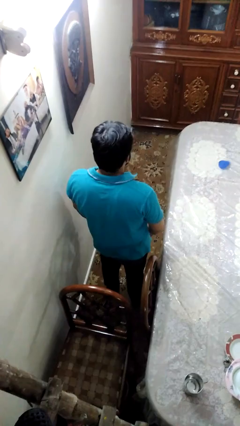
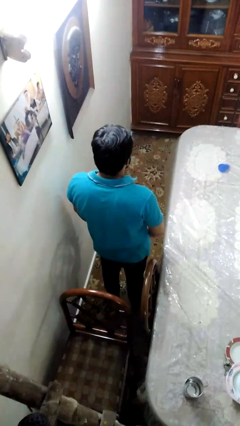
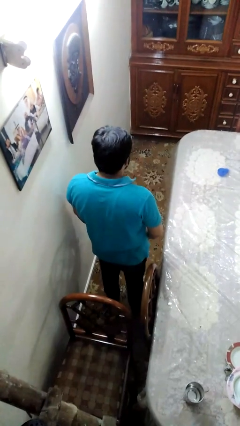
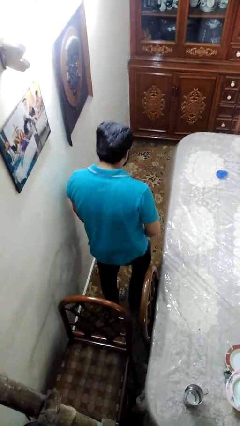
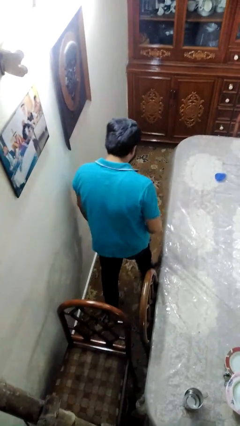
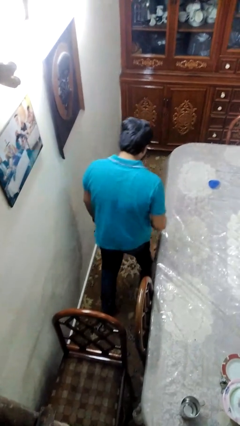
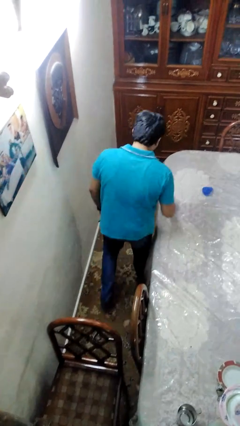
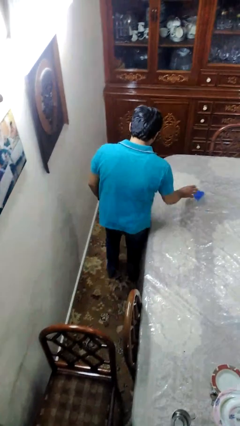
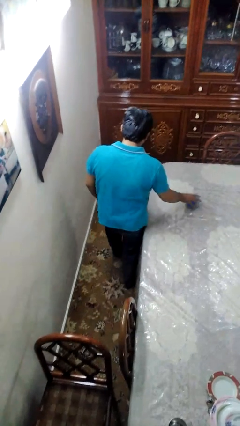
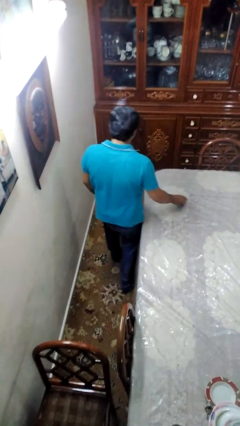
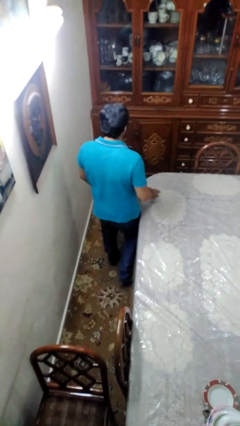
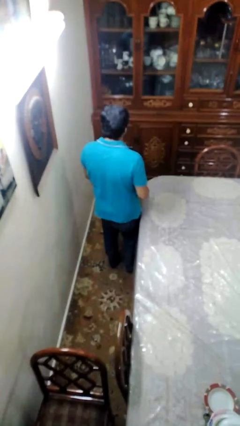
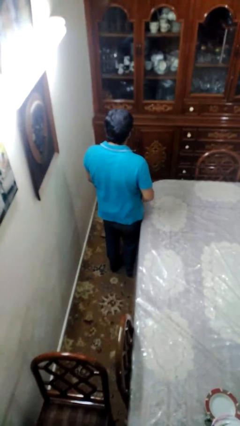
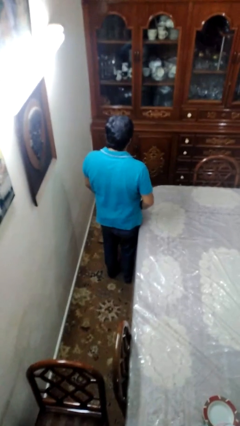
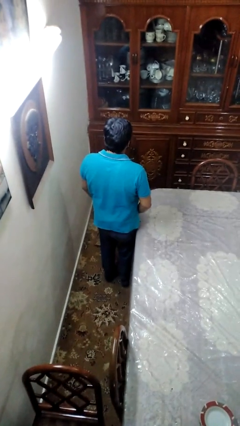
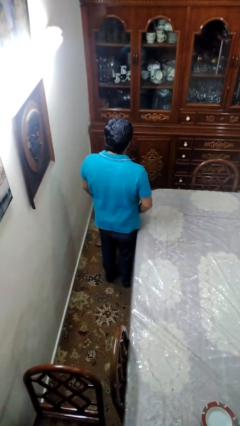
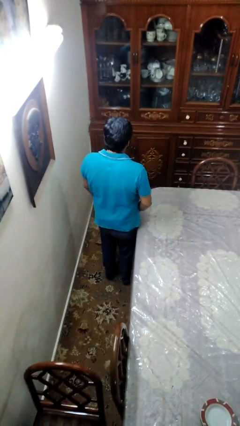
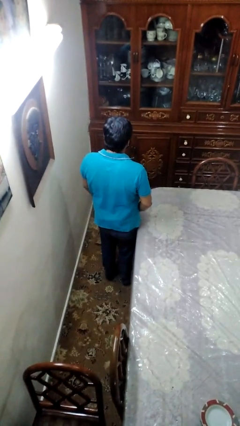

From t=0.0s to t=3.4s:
person picks up object from table

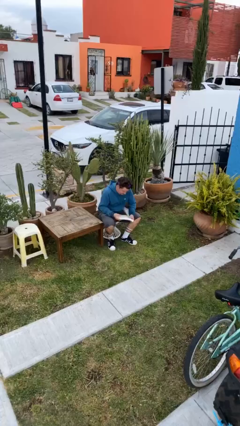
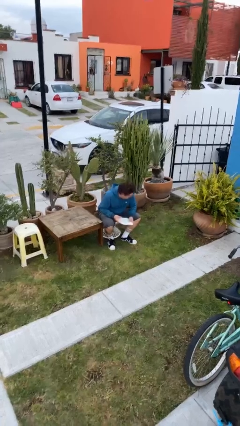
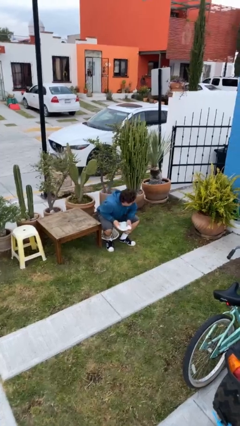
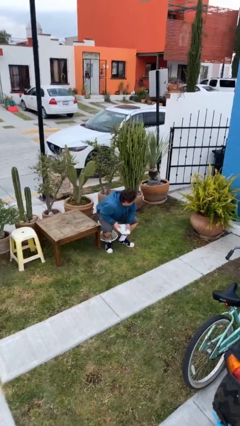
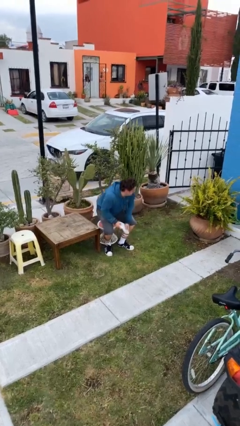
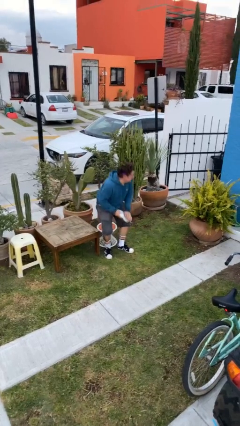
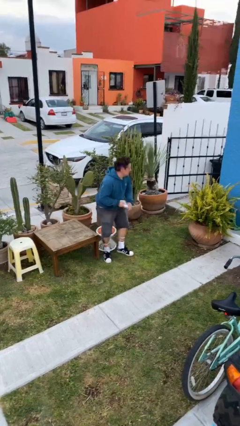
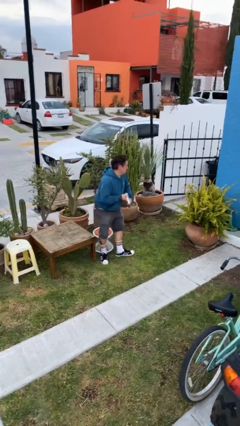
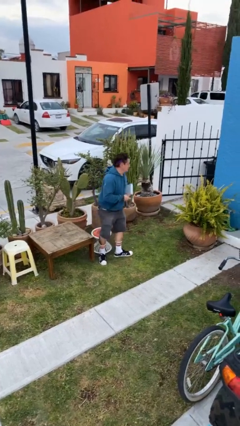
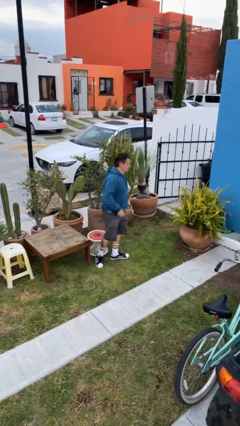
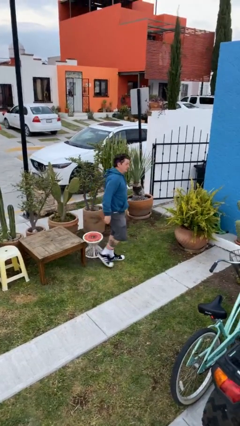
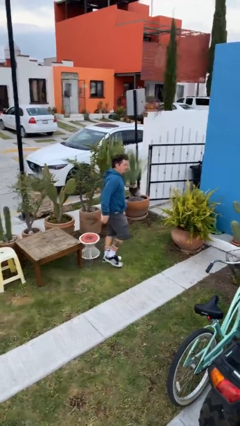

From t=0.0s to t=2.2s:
person stands up

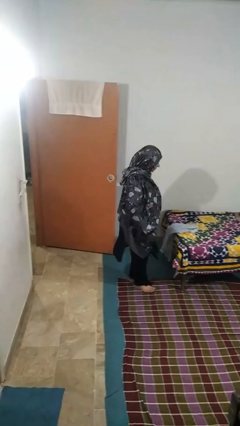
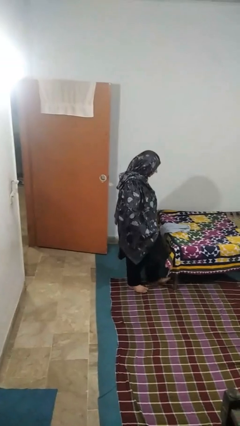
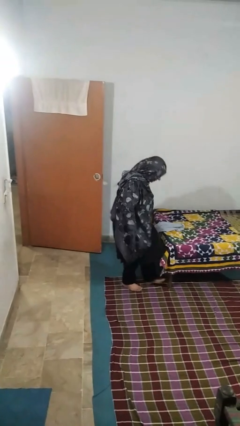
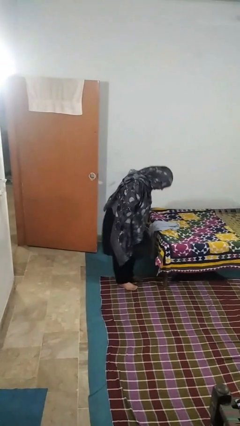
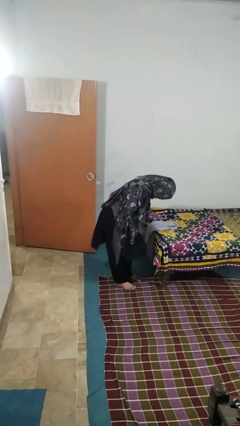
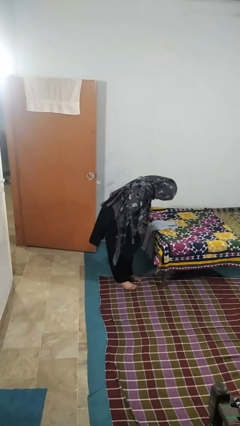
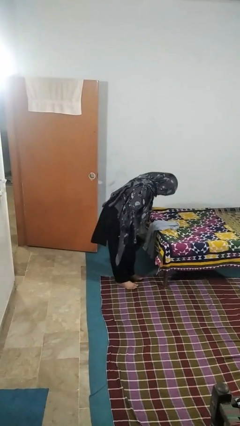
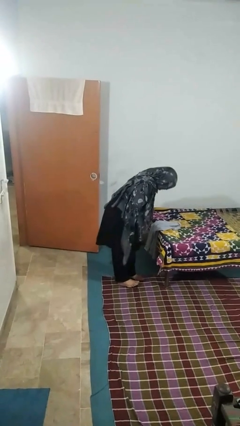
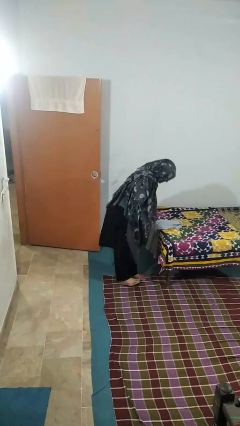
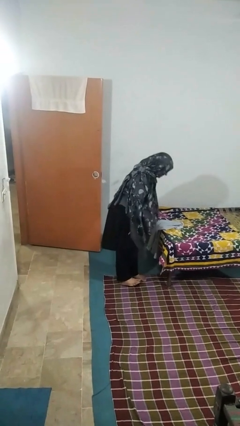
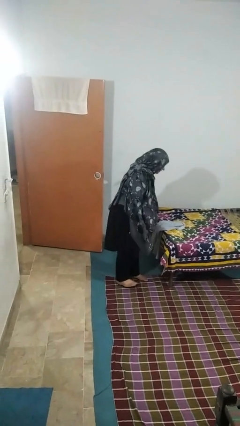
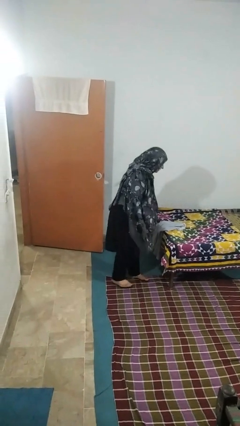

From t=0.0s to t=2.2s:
person stubs toe

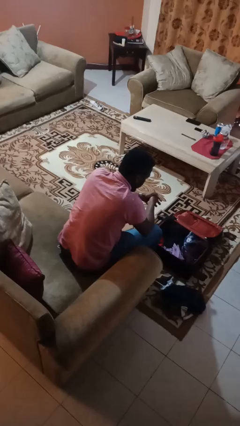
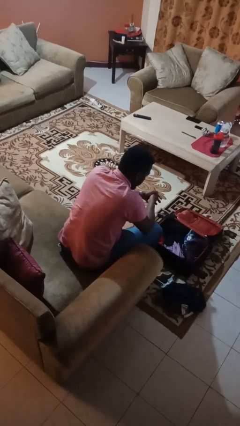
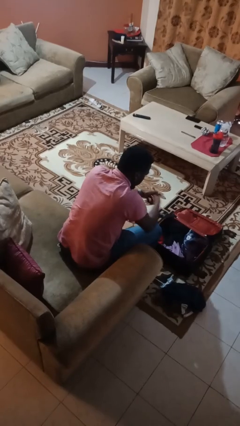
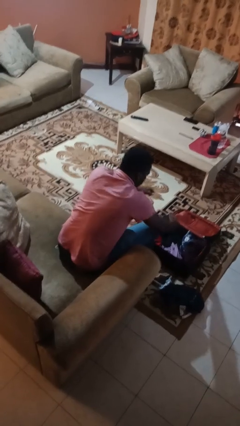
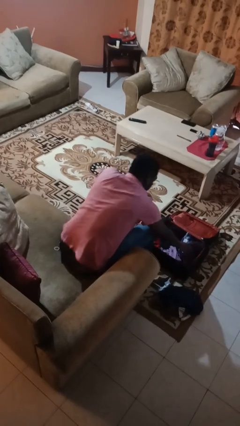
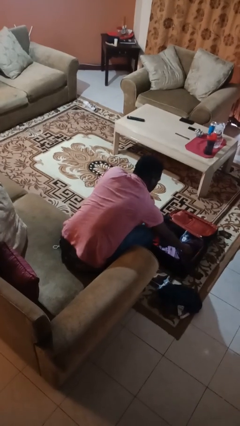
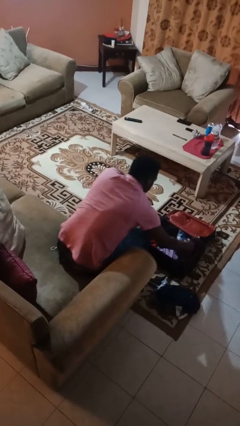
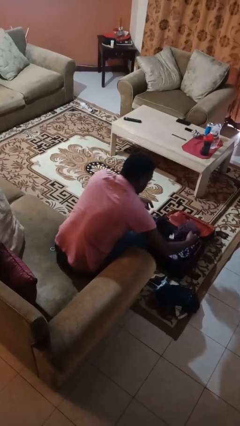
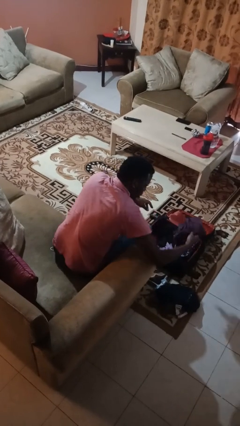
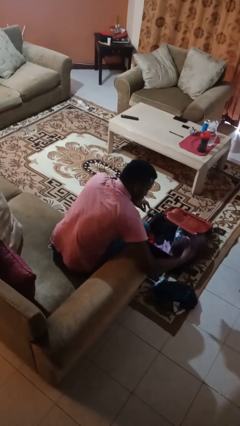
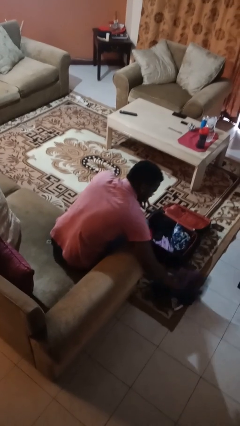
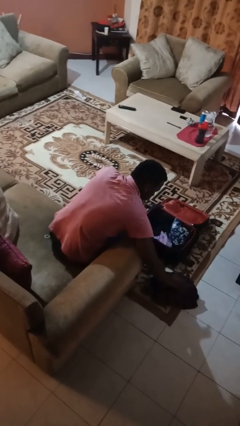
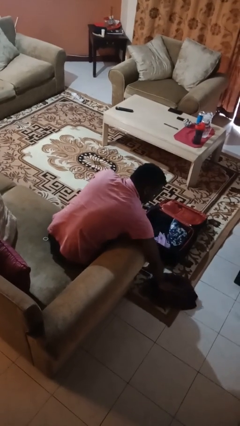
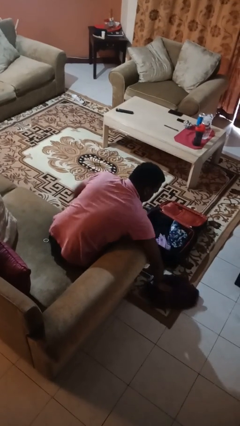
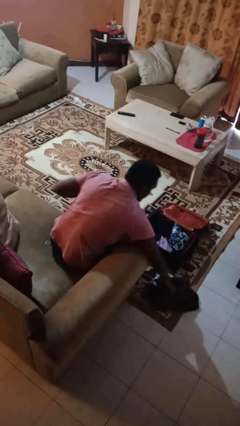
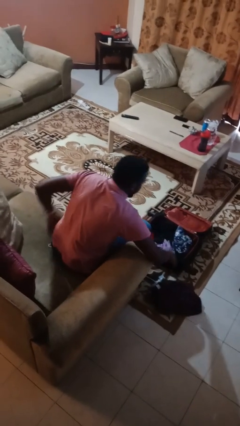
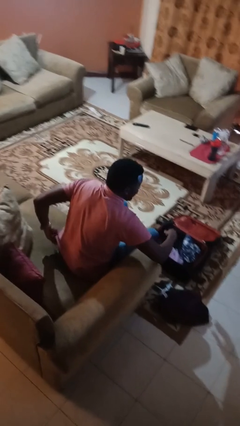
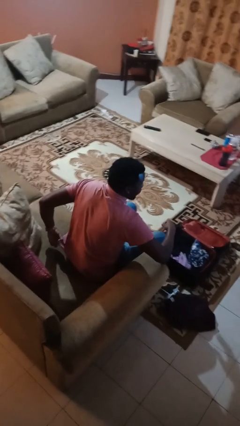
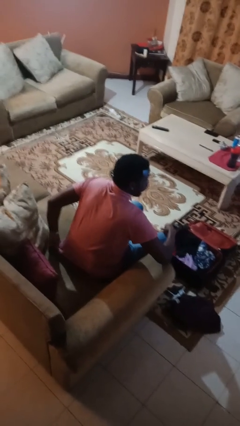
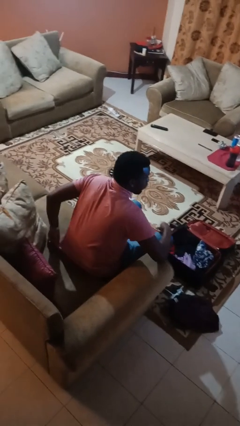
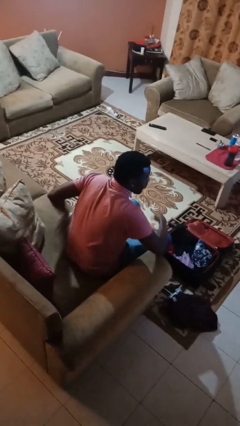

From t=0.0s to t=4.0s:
person unloads clothes from suitcase

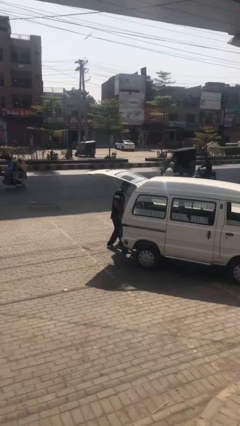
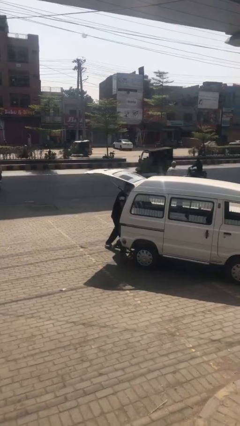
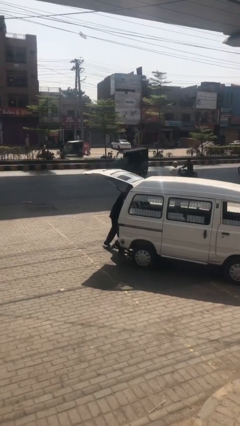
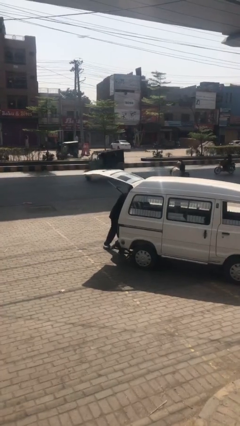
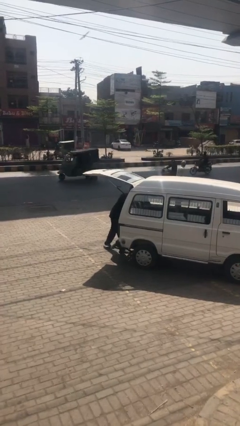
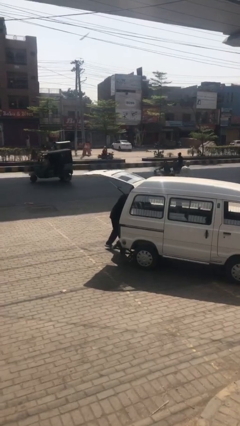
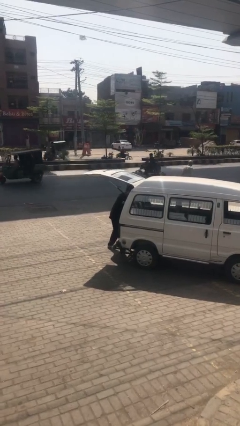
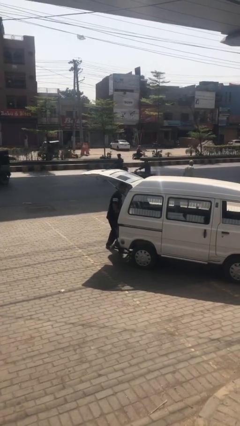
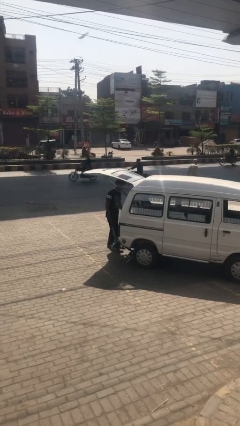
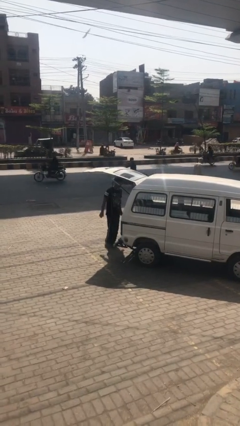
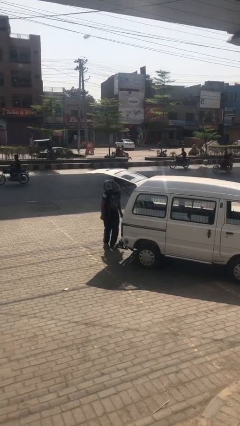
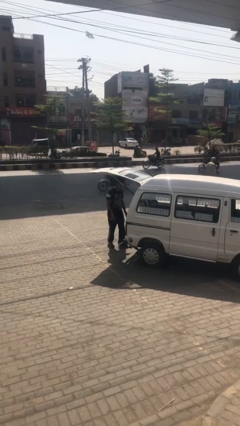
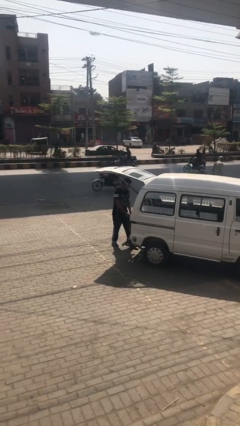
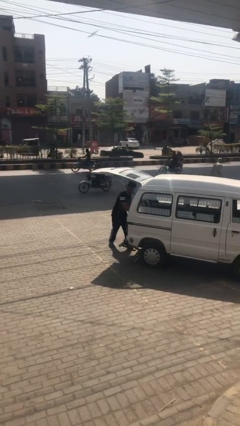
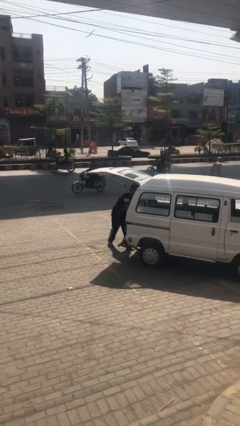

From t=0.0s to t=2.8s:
person loads car

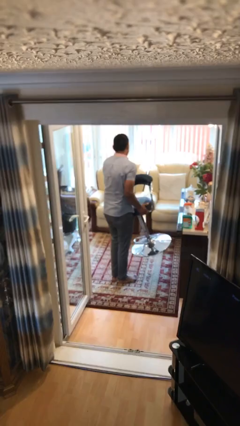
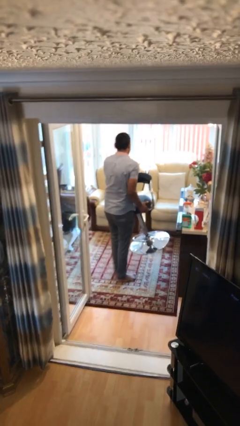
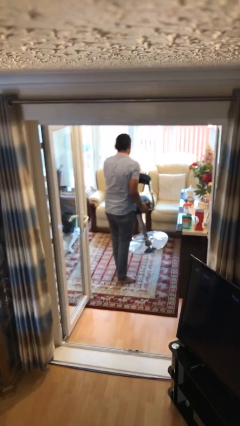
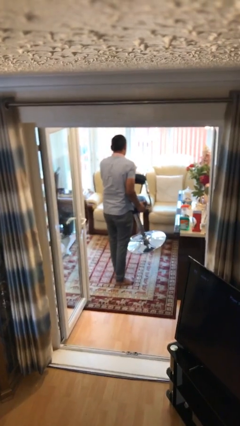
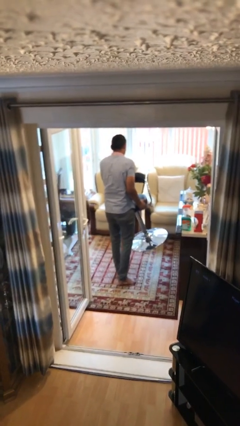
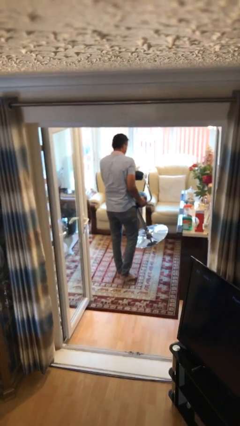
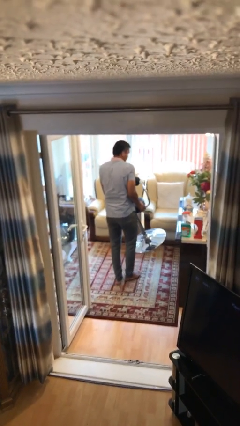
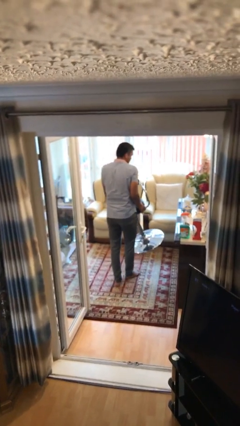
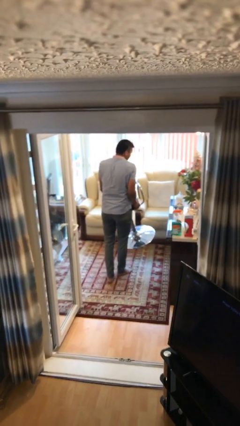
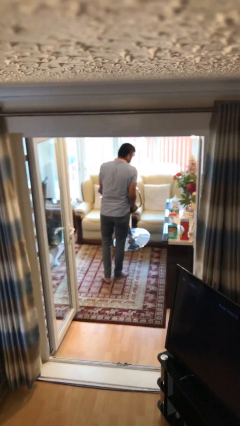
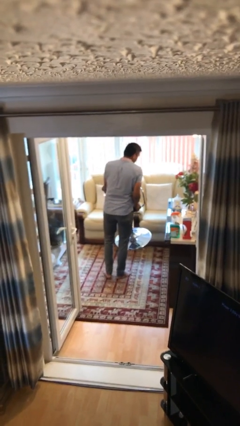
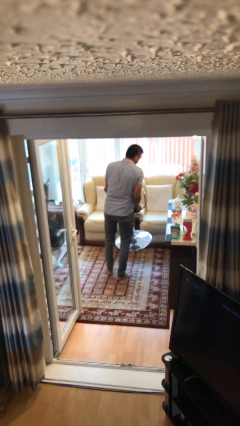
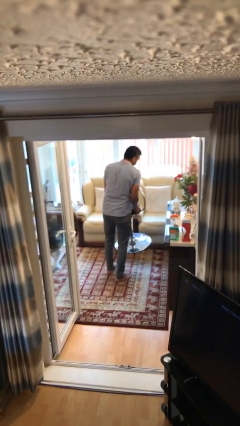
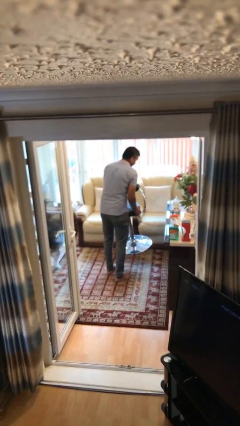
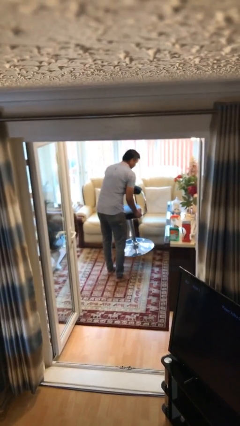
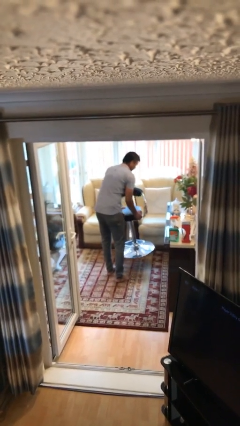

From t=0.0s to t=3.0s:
person carries heavy object
